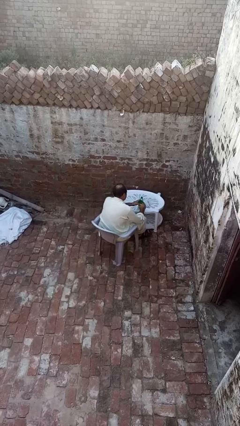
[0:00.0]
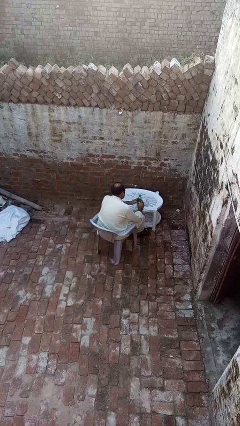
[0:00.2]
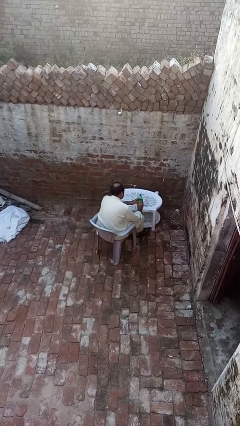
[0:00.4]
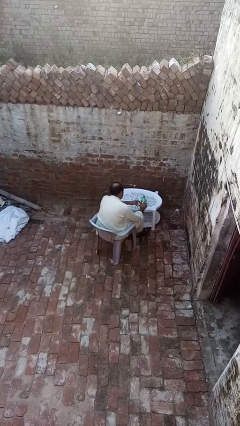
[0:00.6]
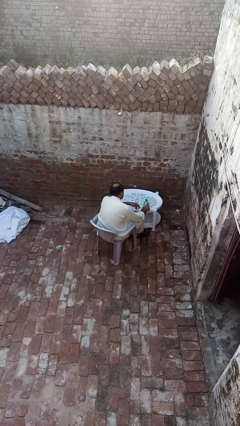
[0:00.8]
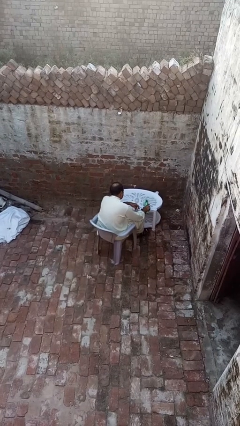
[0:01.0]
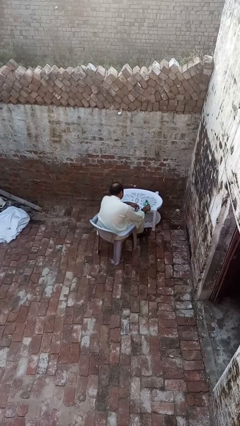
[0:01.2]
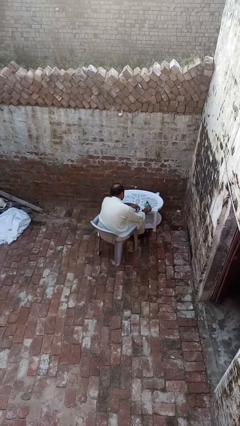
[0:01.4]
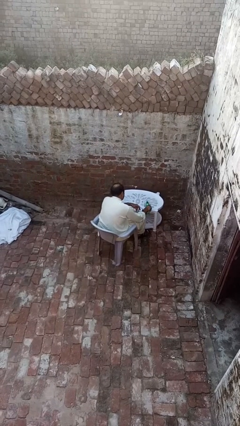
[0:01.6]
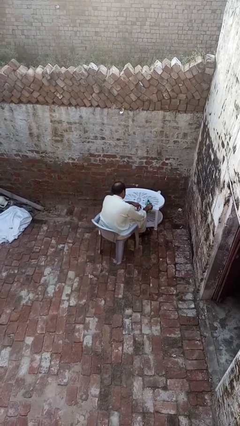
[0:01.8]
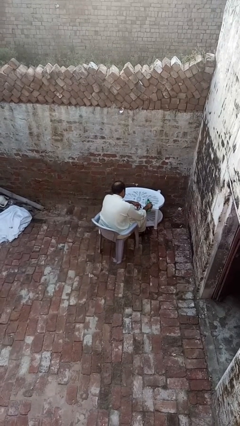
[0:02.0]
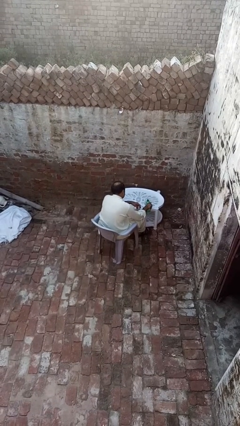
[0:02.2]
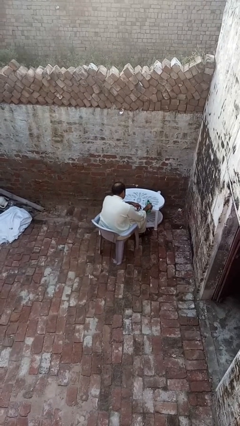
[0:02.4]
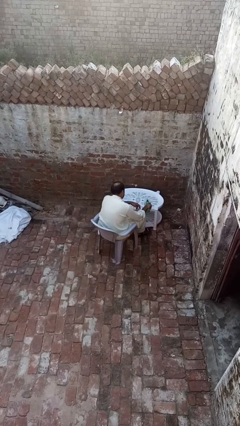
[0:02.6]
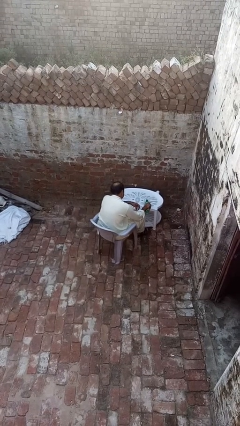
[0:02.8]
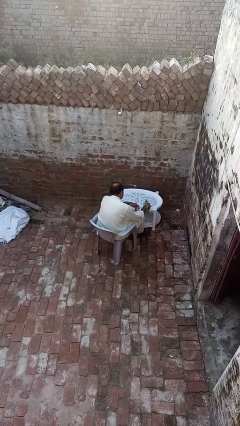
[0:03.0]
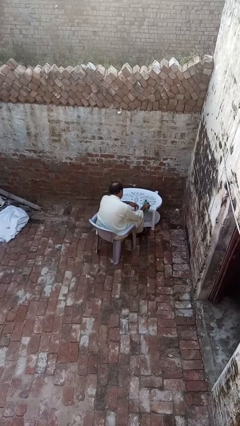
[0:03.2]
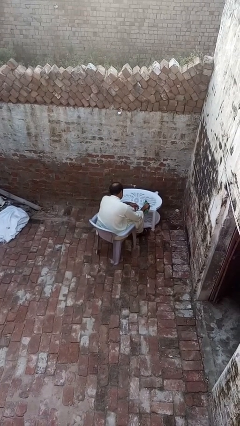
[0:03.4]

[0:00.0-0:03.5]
person pours liquid into cup

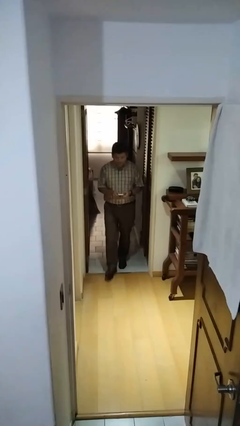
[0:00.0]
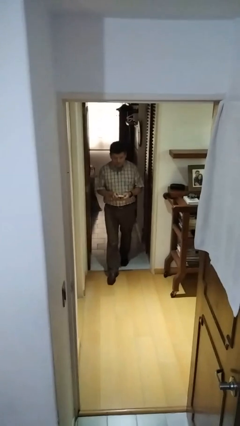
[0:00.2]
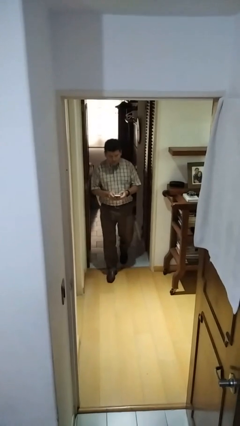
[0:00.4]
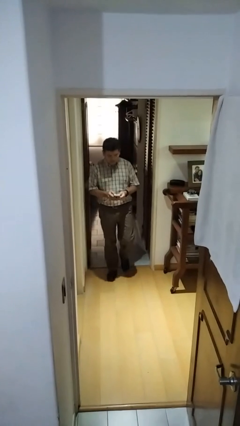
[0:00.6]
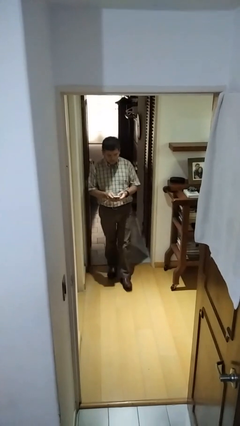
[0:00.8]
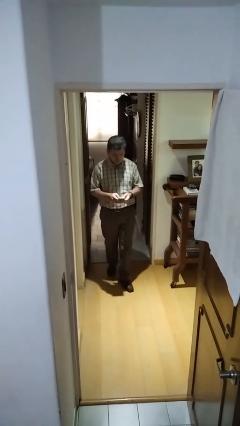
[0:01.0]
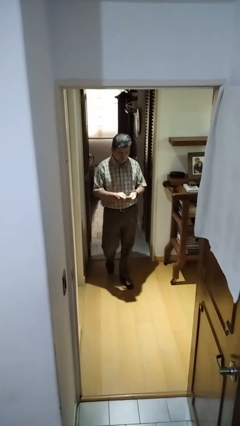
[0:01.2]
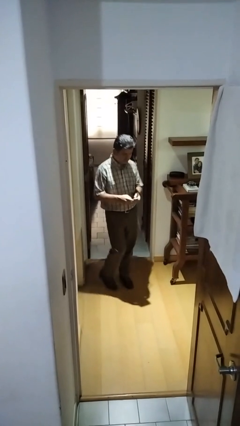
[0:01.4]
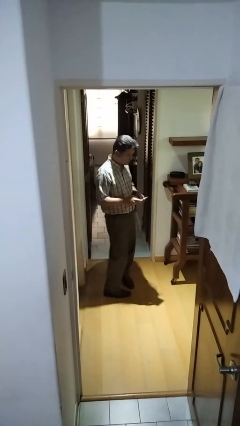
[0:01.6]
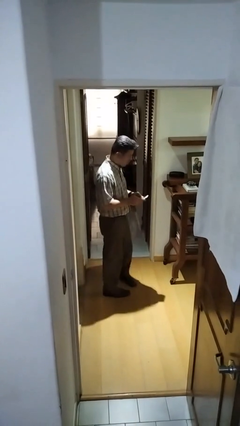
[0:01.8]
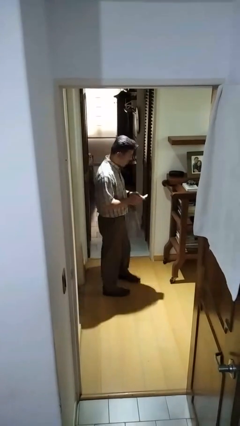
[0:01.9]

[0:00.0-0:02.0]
person enters scene through structure

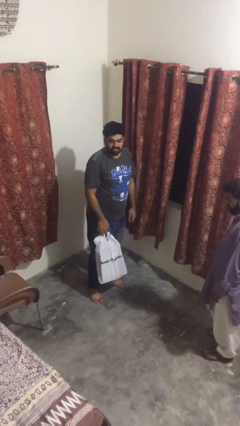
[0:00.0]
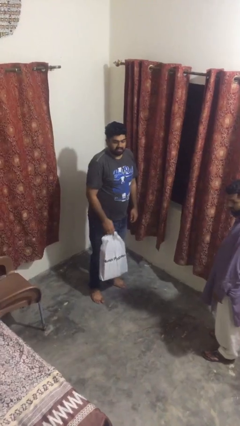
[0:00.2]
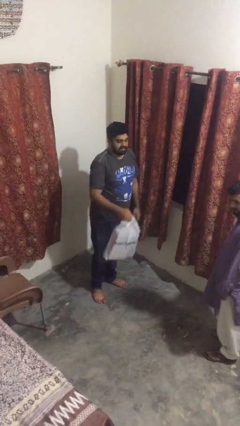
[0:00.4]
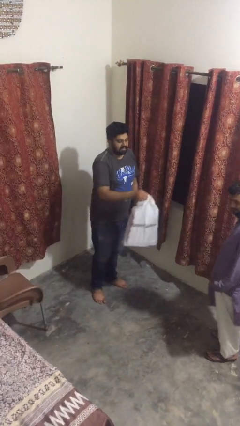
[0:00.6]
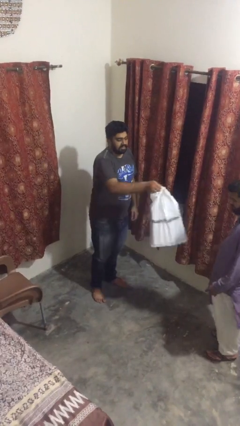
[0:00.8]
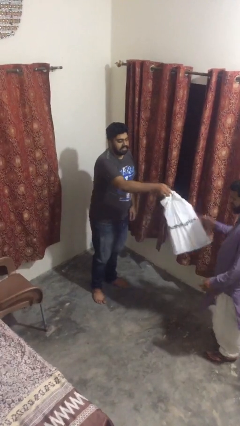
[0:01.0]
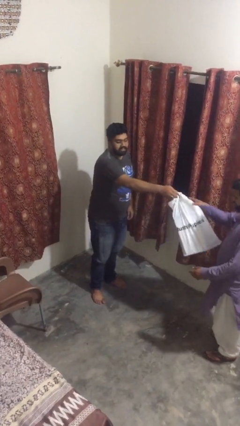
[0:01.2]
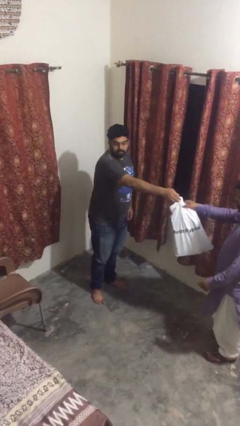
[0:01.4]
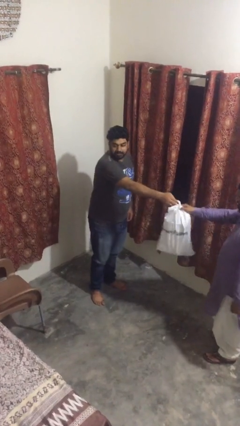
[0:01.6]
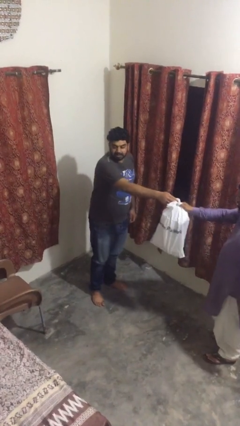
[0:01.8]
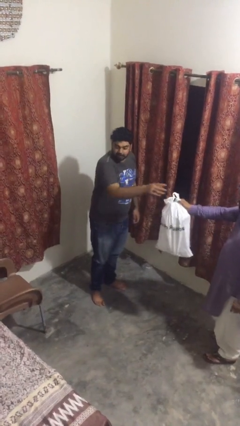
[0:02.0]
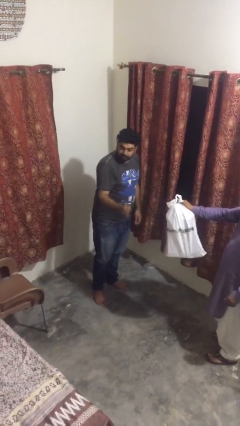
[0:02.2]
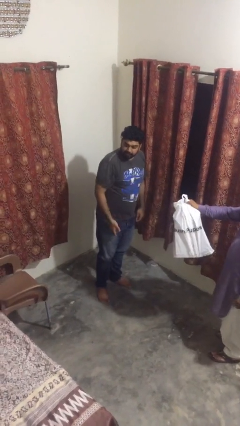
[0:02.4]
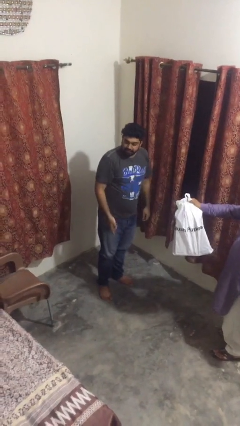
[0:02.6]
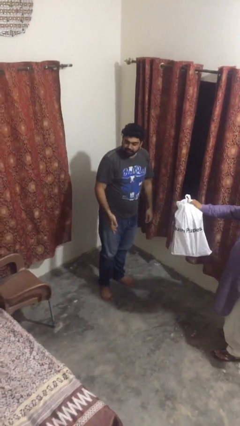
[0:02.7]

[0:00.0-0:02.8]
person transfers object to person

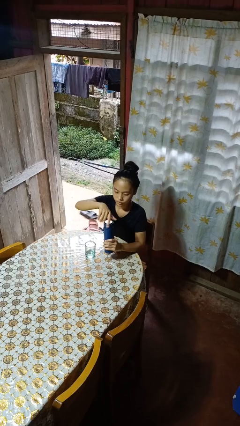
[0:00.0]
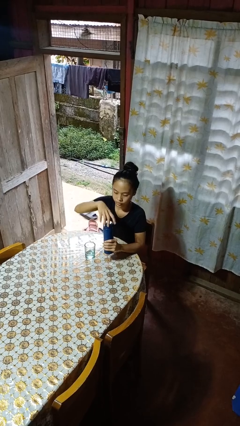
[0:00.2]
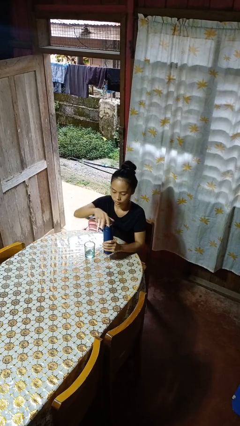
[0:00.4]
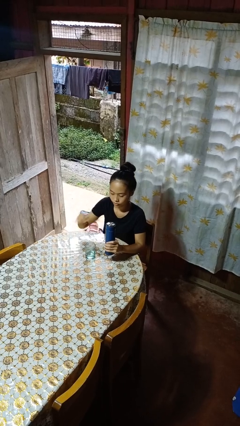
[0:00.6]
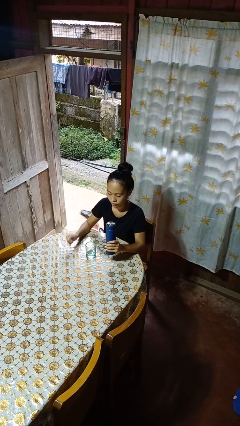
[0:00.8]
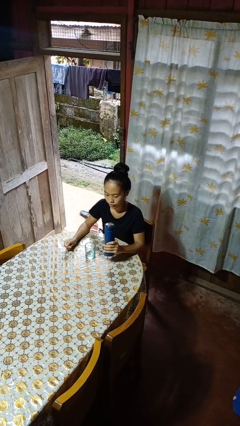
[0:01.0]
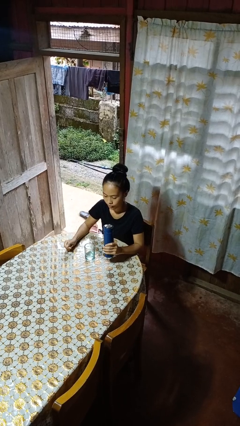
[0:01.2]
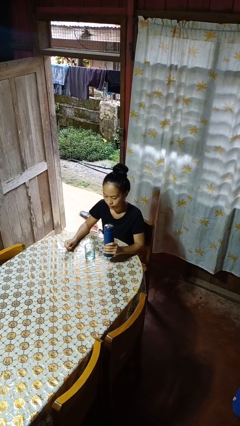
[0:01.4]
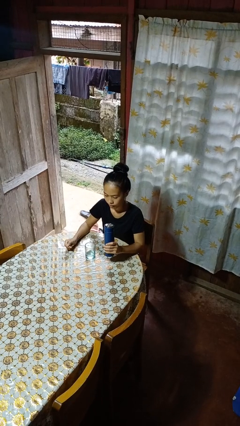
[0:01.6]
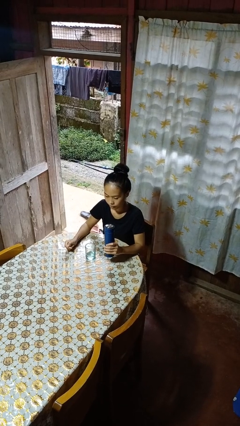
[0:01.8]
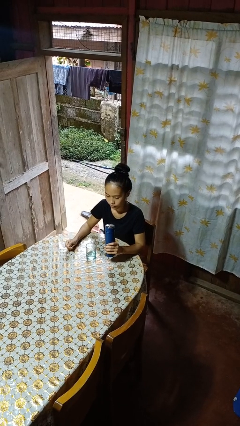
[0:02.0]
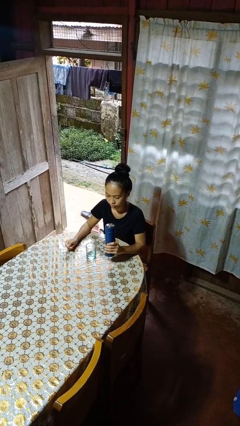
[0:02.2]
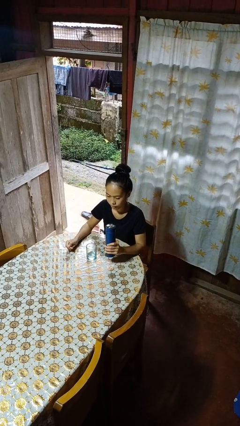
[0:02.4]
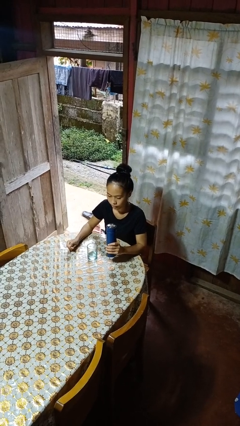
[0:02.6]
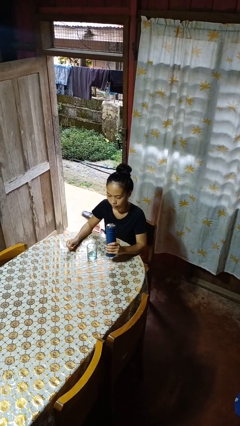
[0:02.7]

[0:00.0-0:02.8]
person screws lid to bottle

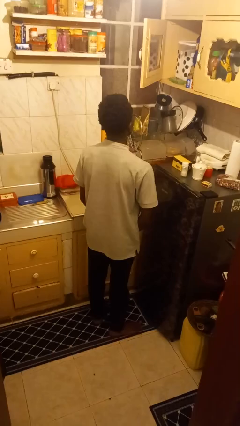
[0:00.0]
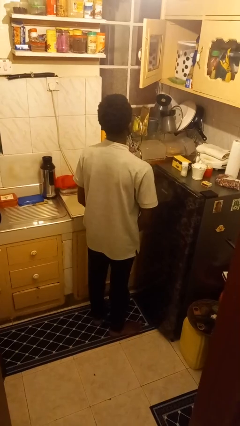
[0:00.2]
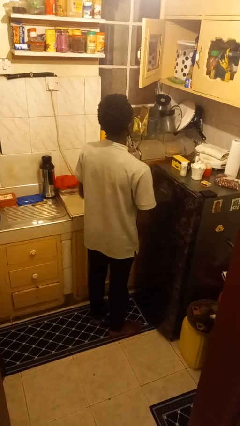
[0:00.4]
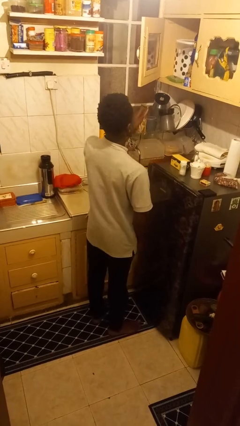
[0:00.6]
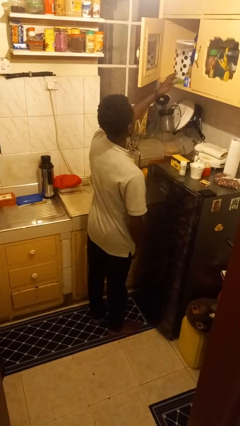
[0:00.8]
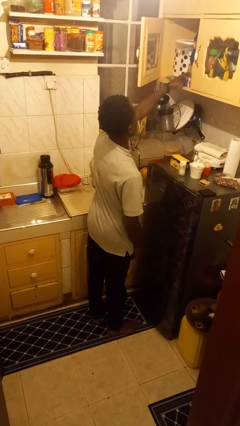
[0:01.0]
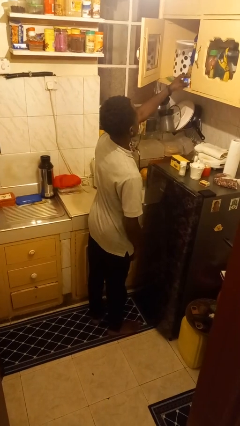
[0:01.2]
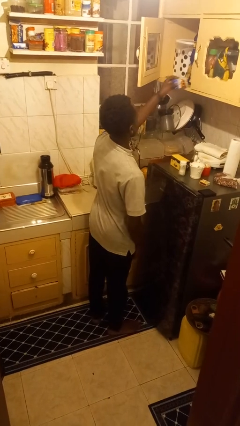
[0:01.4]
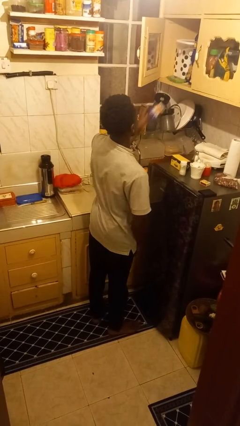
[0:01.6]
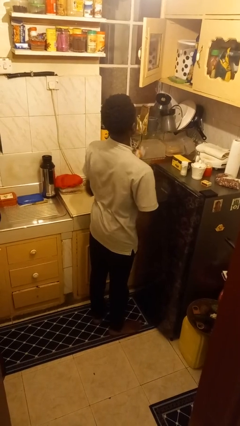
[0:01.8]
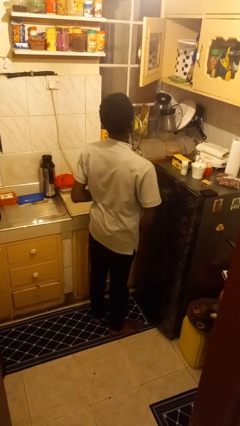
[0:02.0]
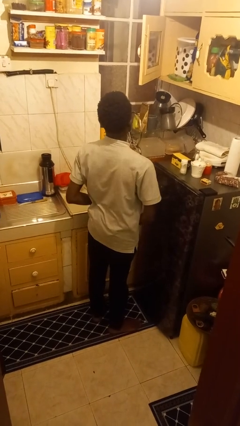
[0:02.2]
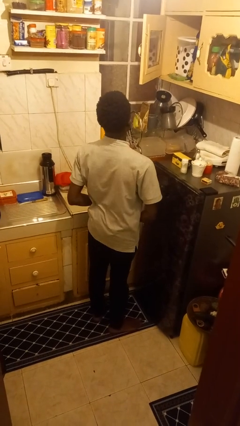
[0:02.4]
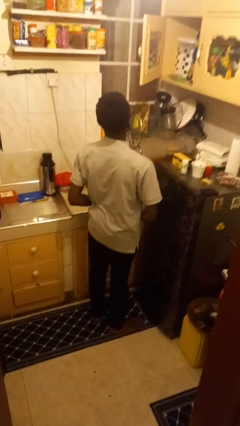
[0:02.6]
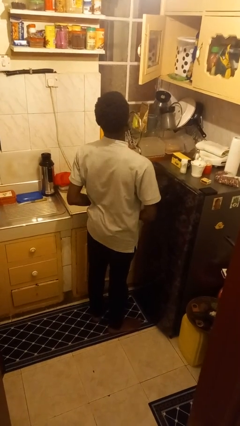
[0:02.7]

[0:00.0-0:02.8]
person picks up object from cabinet

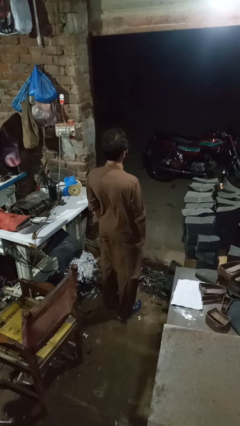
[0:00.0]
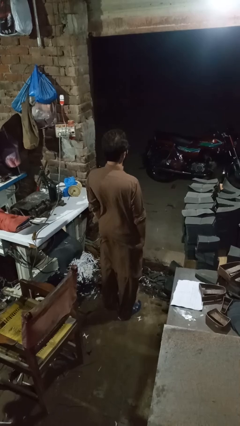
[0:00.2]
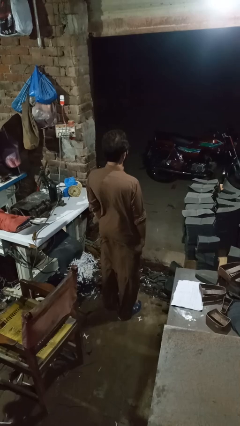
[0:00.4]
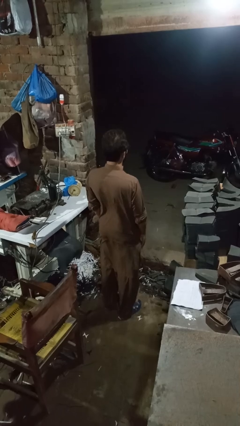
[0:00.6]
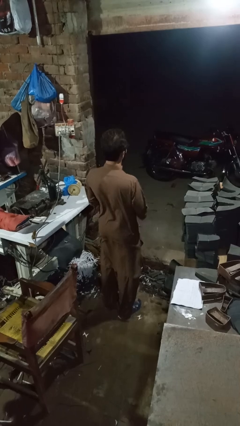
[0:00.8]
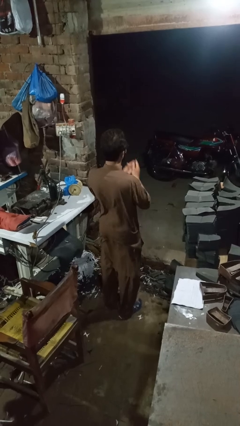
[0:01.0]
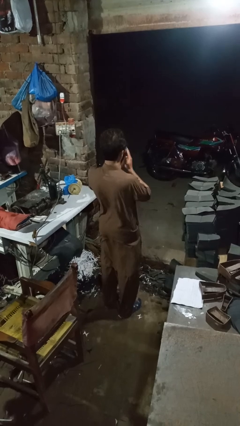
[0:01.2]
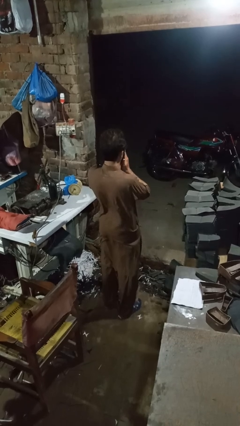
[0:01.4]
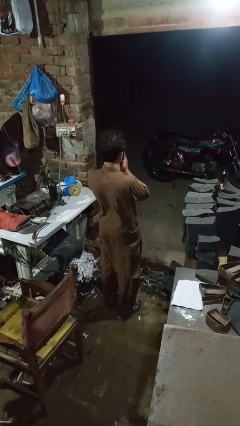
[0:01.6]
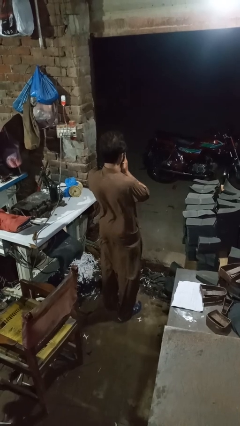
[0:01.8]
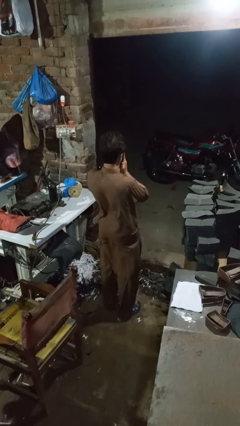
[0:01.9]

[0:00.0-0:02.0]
person sneezes into hand

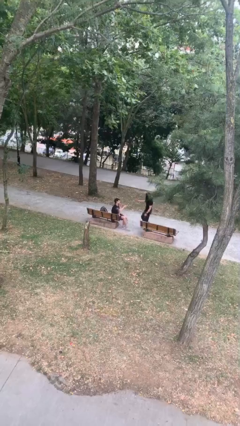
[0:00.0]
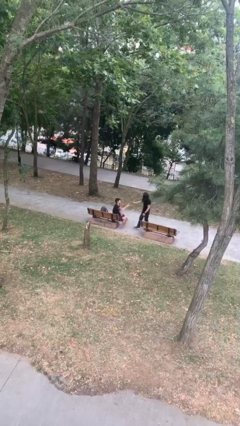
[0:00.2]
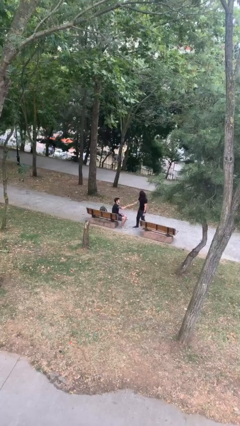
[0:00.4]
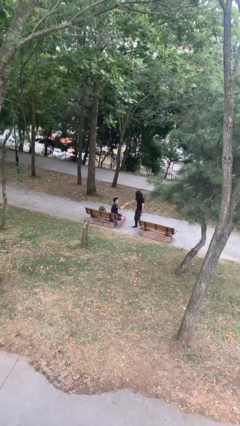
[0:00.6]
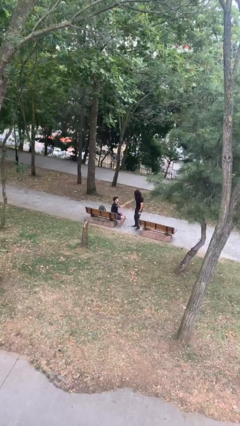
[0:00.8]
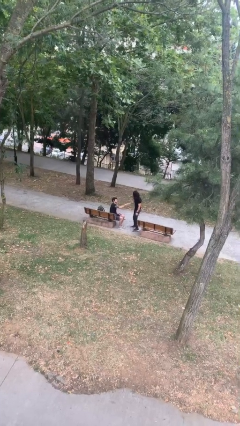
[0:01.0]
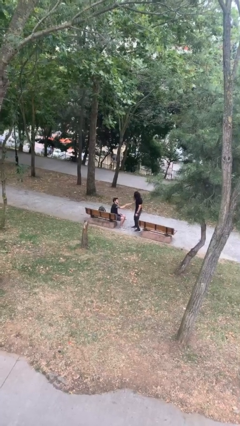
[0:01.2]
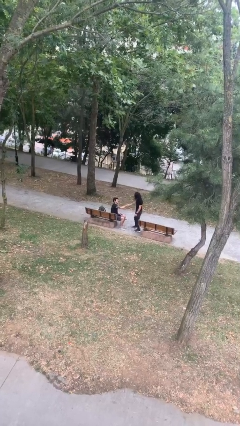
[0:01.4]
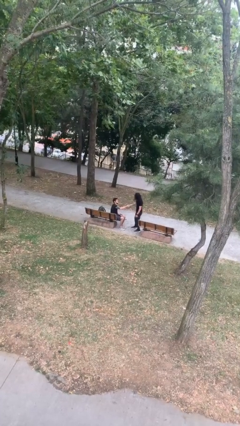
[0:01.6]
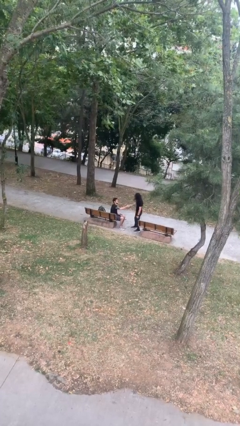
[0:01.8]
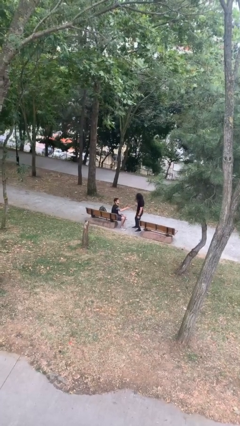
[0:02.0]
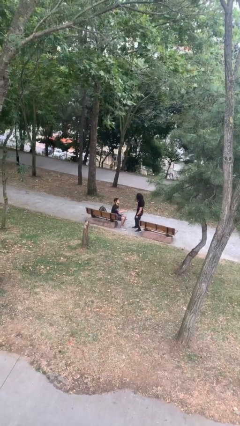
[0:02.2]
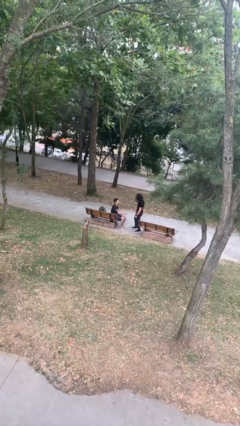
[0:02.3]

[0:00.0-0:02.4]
person shakes hand
